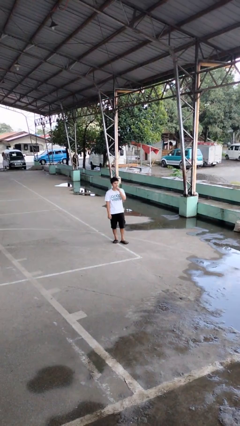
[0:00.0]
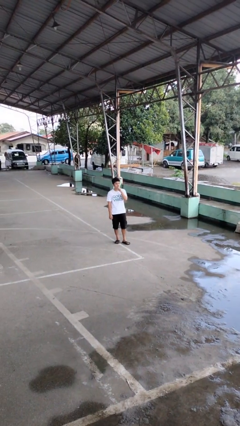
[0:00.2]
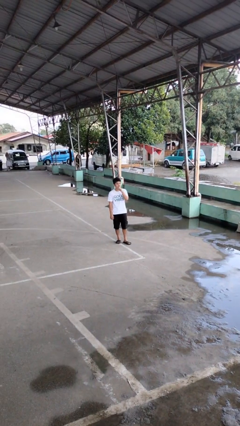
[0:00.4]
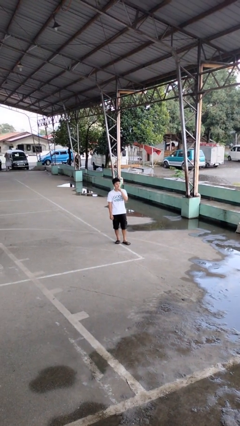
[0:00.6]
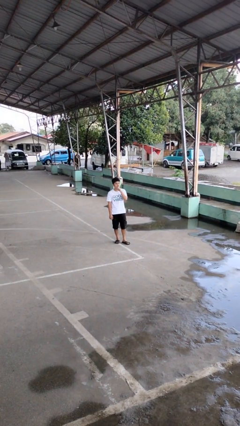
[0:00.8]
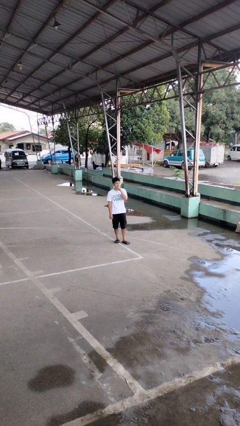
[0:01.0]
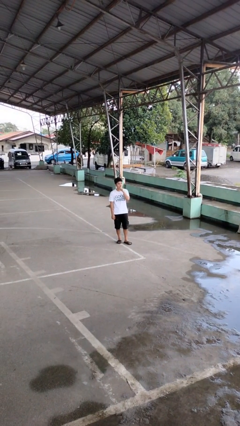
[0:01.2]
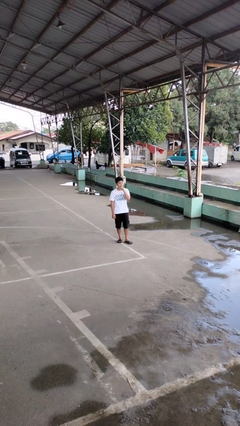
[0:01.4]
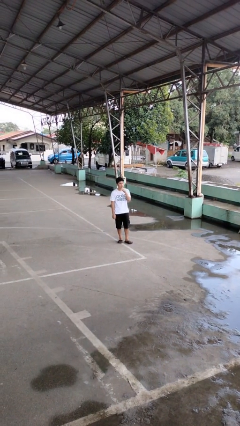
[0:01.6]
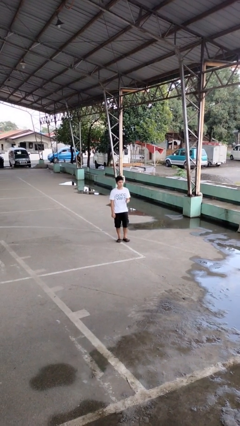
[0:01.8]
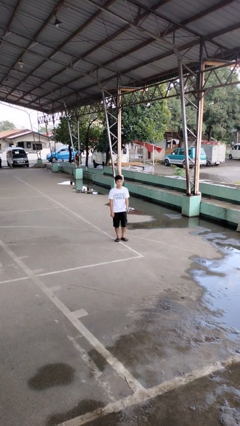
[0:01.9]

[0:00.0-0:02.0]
person gestures be quiet

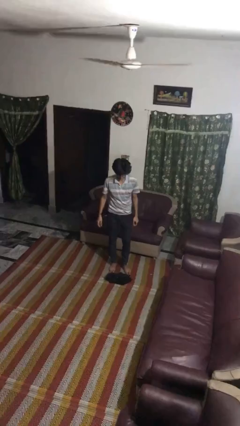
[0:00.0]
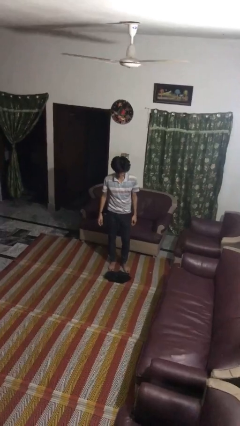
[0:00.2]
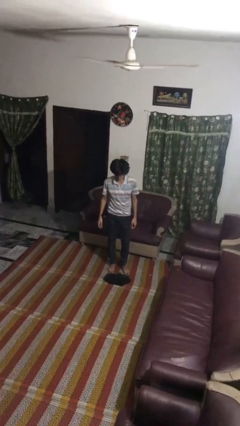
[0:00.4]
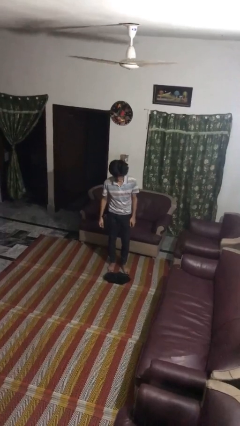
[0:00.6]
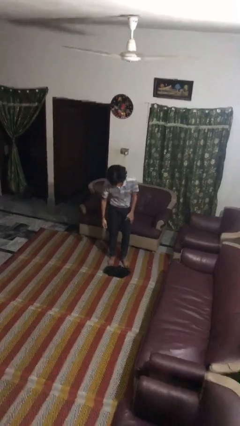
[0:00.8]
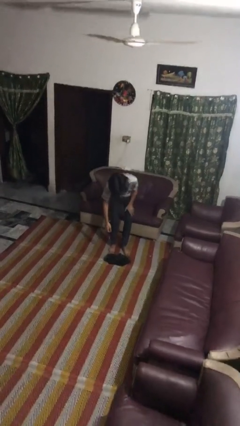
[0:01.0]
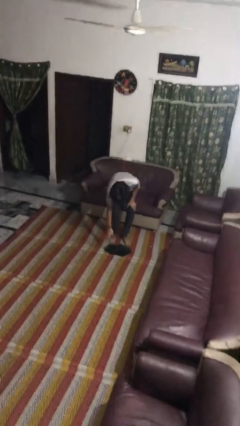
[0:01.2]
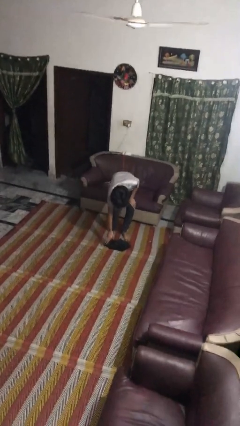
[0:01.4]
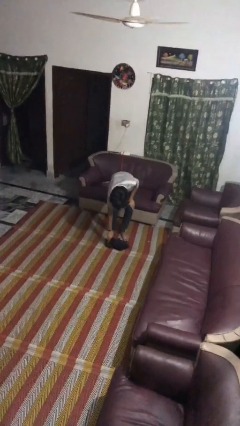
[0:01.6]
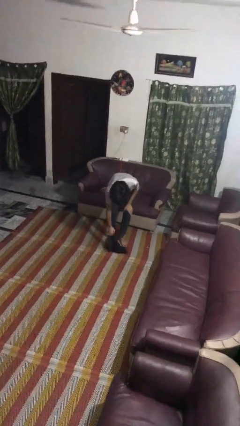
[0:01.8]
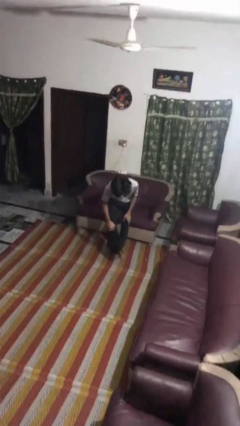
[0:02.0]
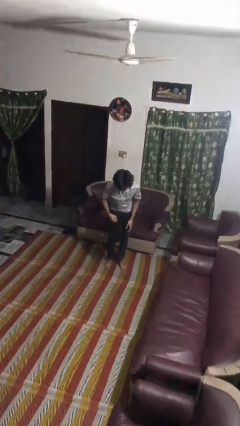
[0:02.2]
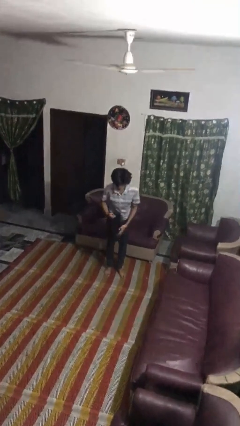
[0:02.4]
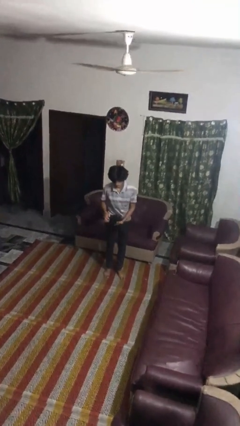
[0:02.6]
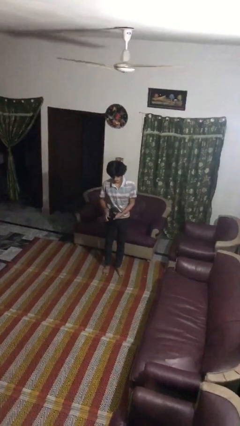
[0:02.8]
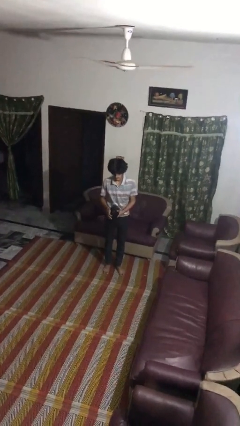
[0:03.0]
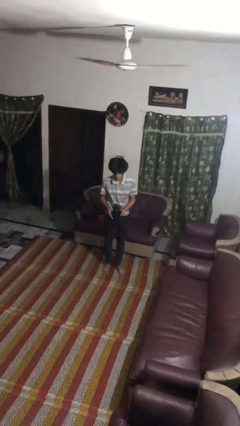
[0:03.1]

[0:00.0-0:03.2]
person picks up object from floor

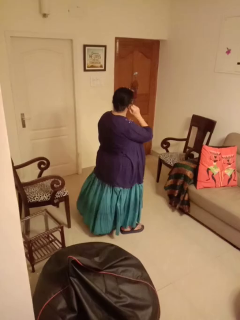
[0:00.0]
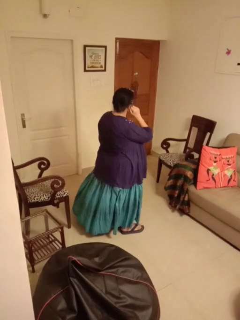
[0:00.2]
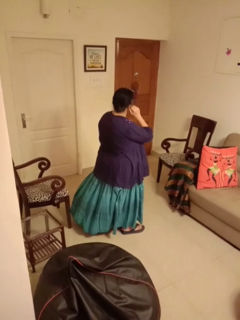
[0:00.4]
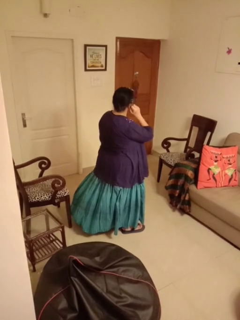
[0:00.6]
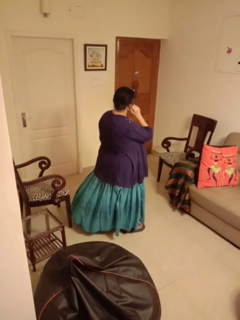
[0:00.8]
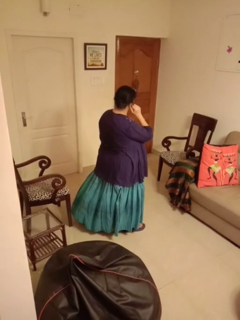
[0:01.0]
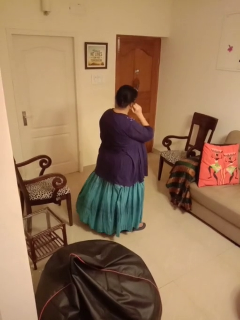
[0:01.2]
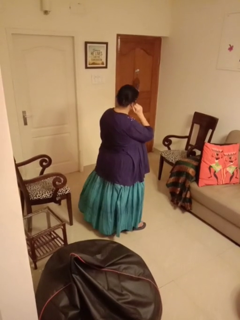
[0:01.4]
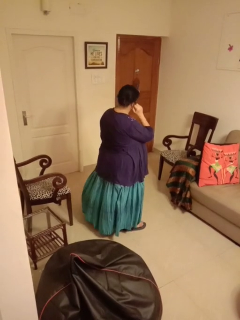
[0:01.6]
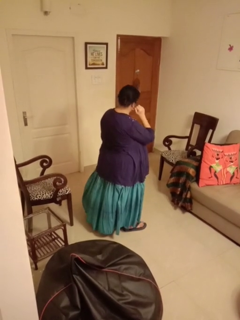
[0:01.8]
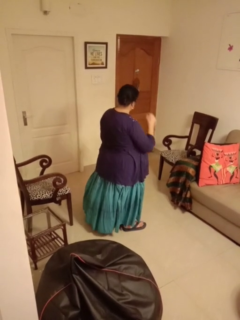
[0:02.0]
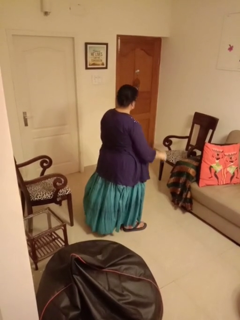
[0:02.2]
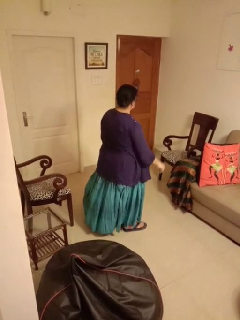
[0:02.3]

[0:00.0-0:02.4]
person touches earlobe

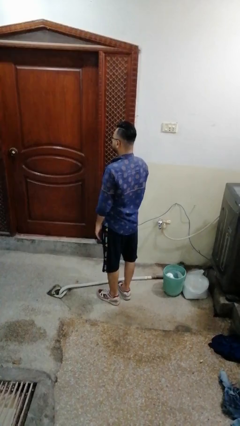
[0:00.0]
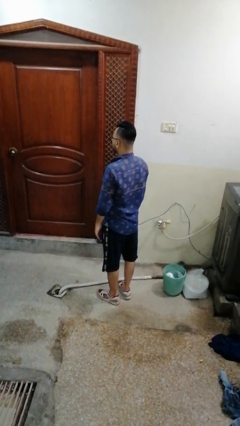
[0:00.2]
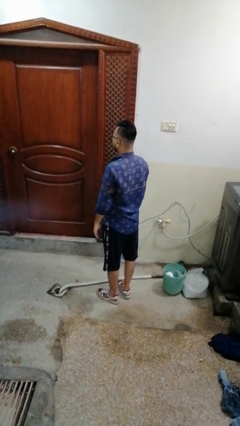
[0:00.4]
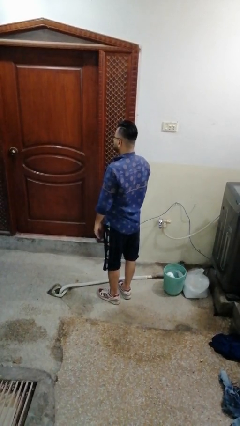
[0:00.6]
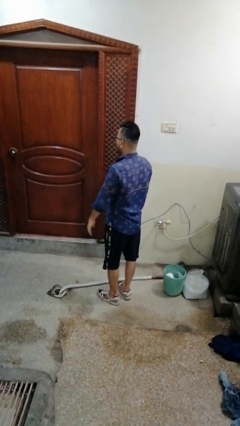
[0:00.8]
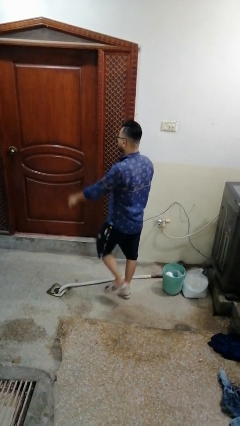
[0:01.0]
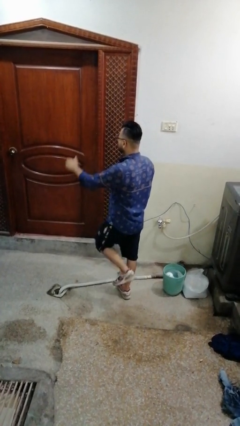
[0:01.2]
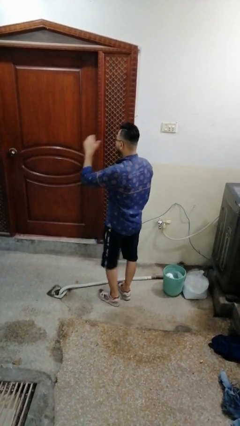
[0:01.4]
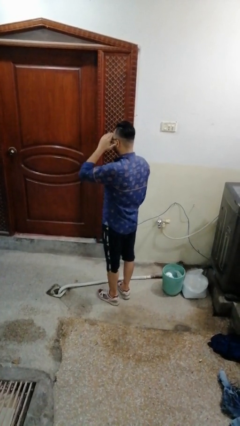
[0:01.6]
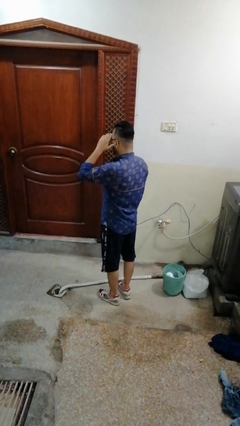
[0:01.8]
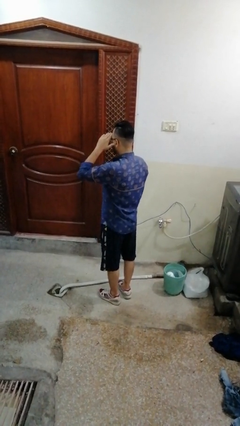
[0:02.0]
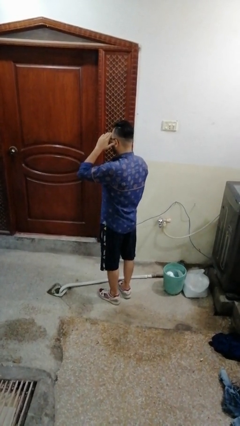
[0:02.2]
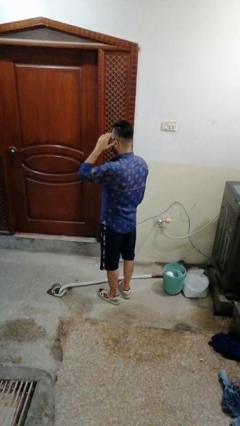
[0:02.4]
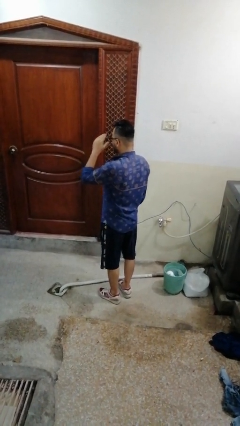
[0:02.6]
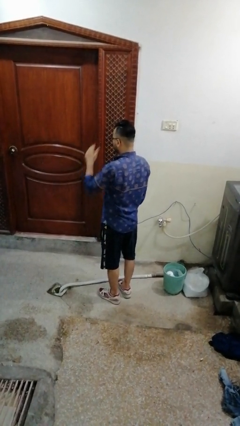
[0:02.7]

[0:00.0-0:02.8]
person salutes

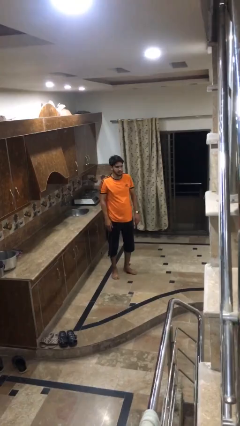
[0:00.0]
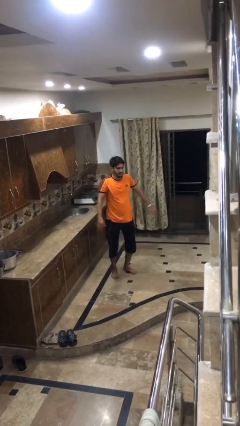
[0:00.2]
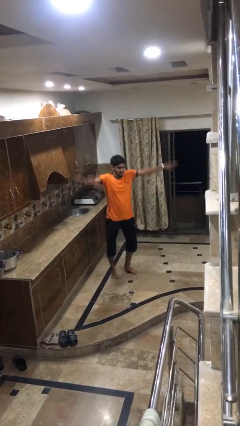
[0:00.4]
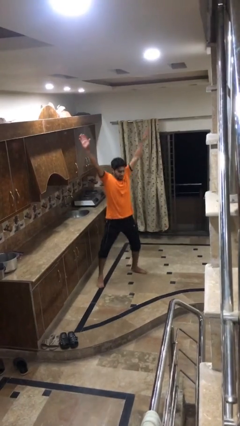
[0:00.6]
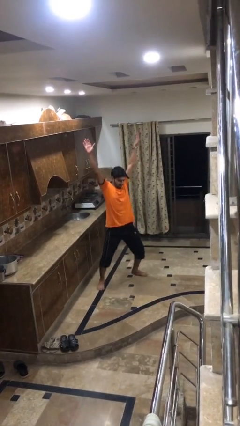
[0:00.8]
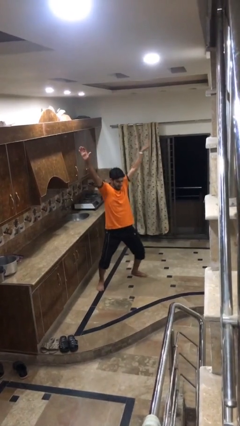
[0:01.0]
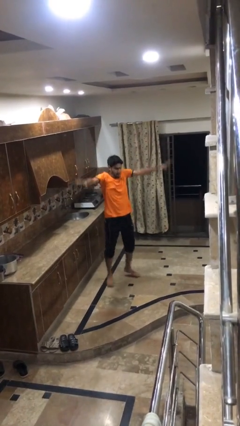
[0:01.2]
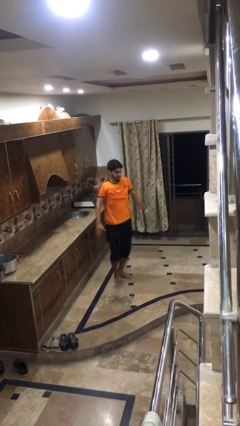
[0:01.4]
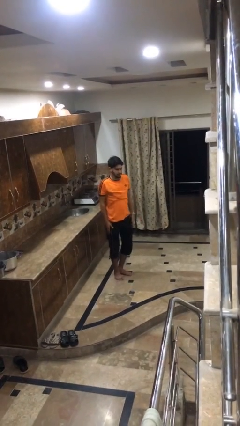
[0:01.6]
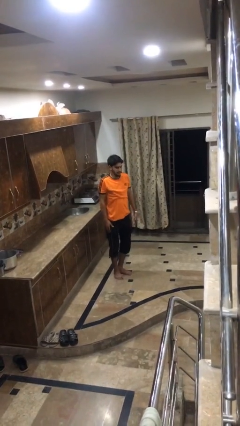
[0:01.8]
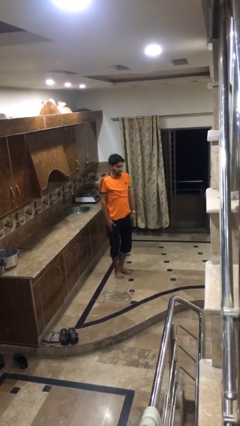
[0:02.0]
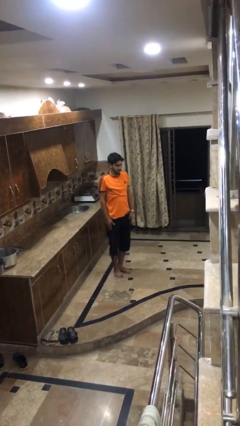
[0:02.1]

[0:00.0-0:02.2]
person exercises with jumping jacks

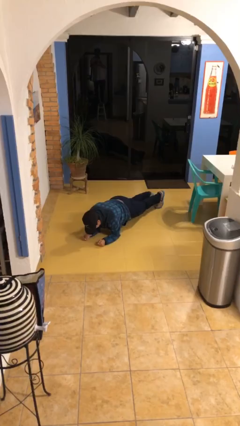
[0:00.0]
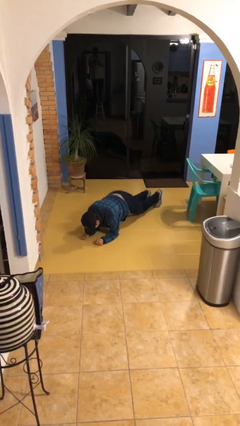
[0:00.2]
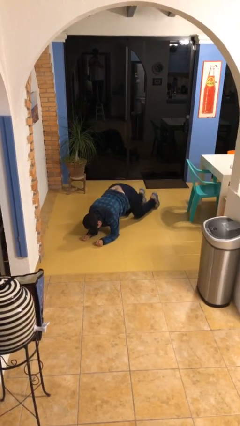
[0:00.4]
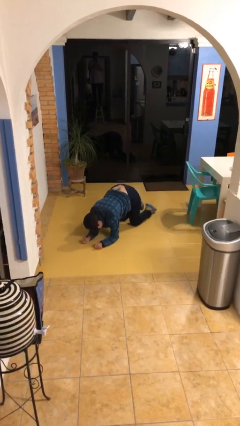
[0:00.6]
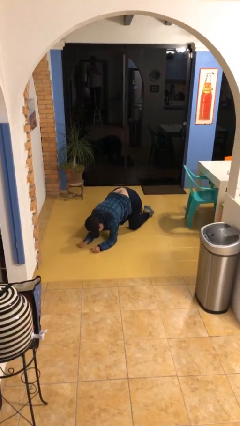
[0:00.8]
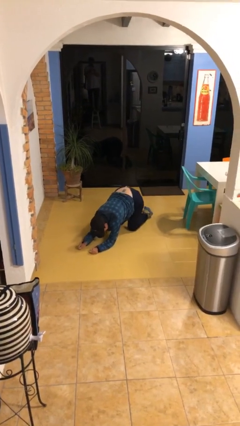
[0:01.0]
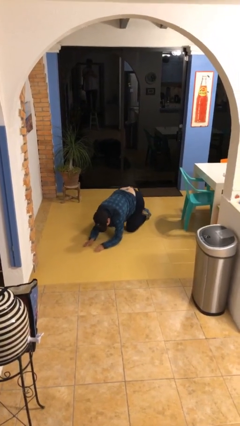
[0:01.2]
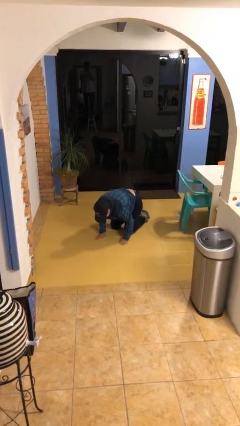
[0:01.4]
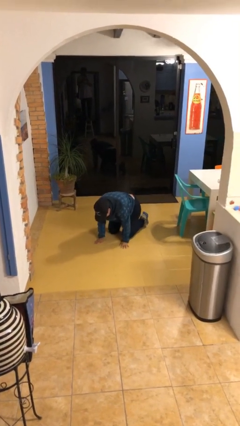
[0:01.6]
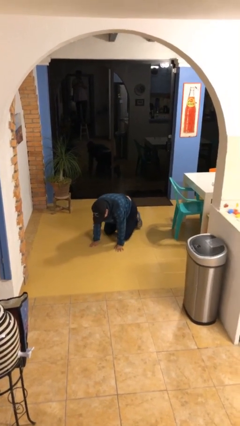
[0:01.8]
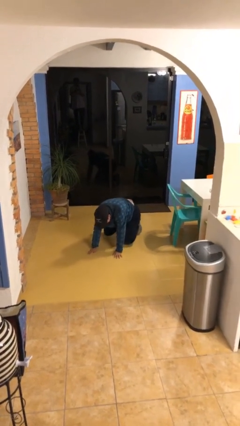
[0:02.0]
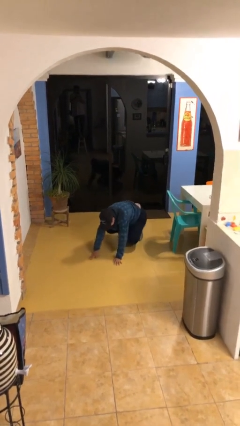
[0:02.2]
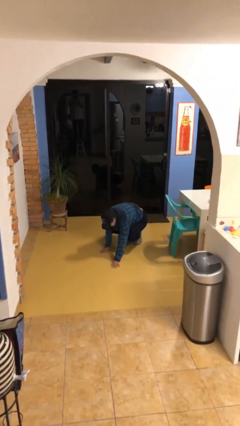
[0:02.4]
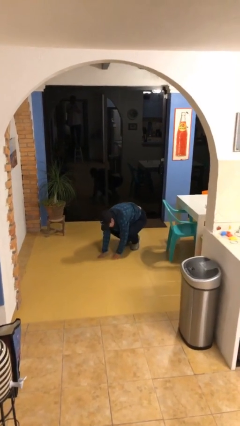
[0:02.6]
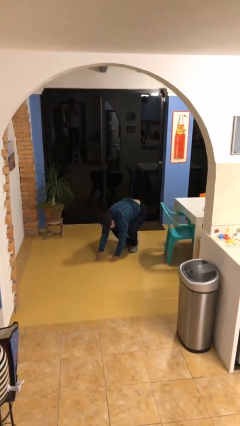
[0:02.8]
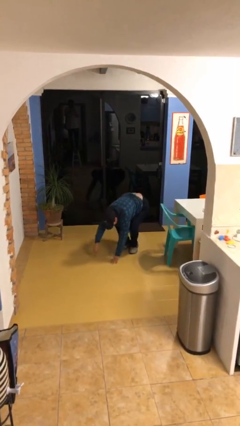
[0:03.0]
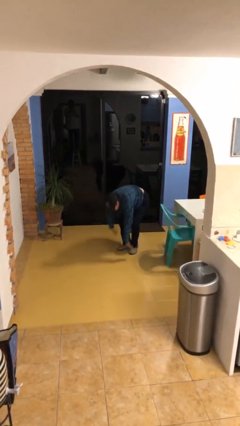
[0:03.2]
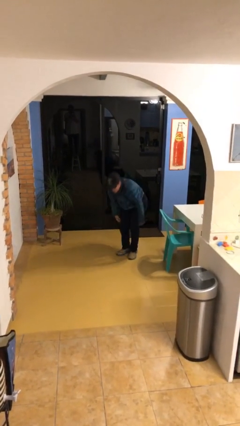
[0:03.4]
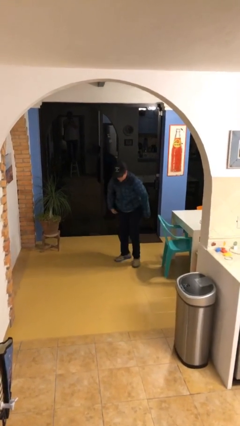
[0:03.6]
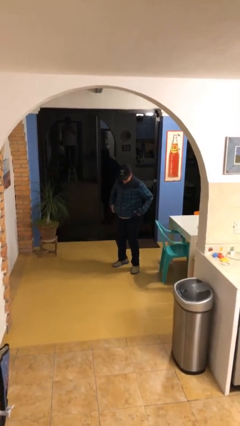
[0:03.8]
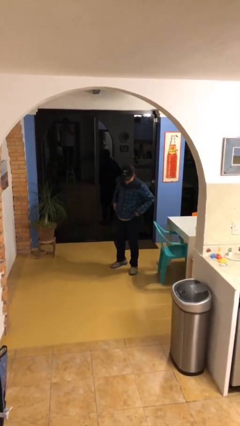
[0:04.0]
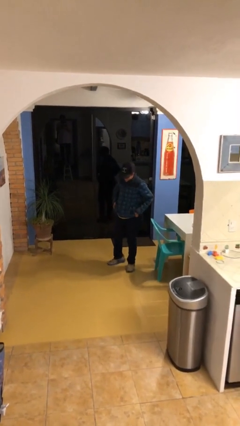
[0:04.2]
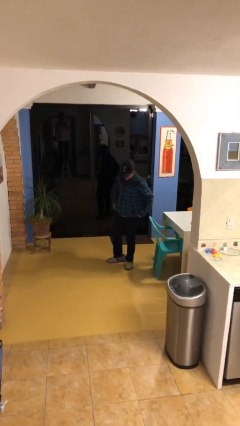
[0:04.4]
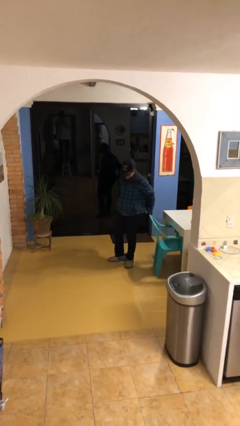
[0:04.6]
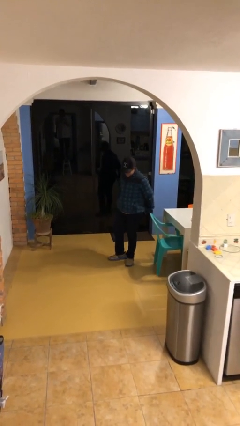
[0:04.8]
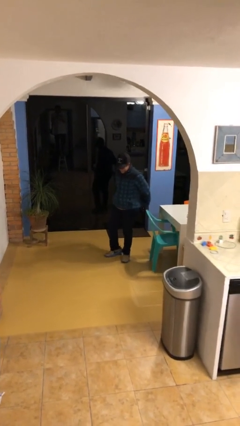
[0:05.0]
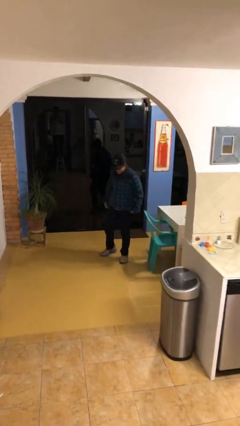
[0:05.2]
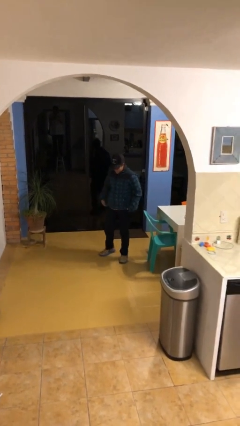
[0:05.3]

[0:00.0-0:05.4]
person stands up from floor
